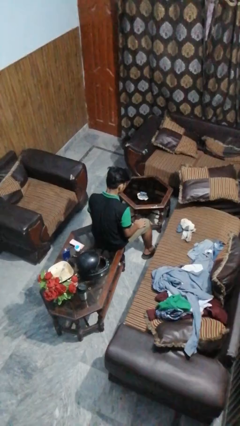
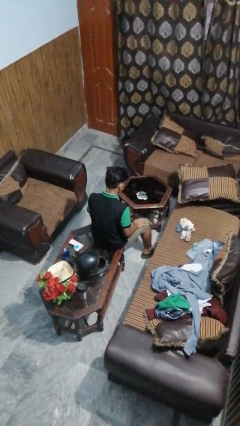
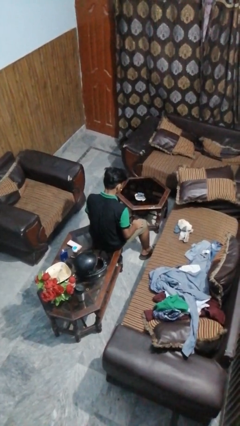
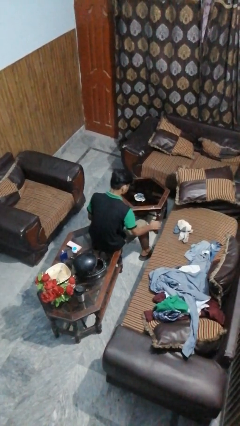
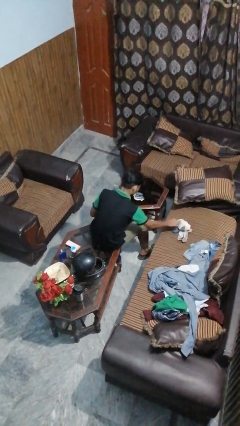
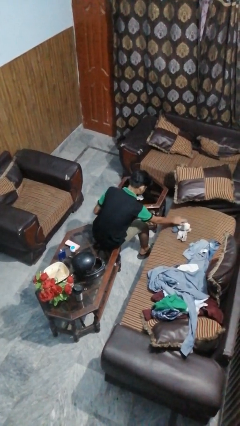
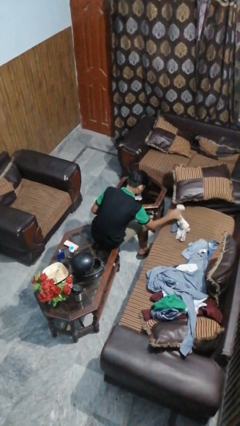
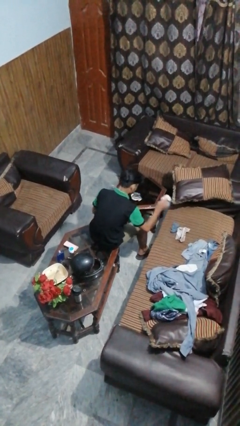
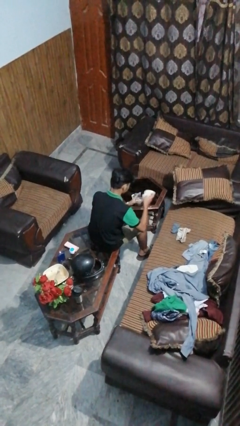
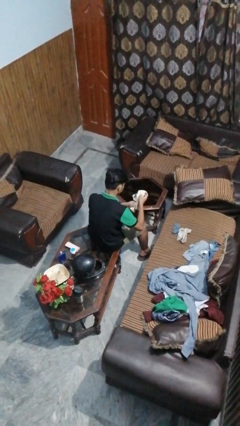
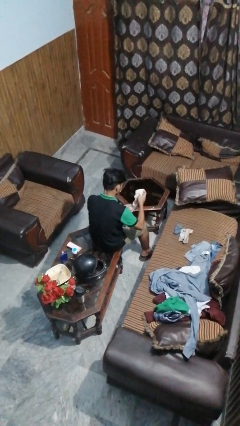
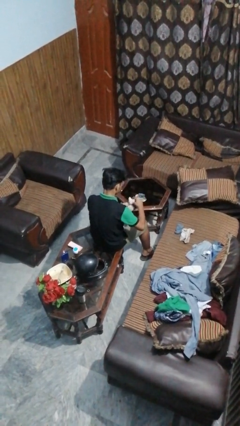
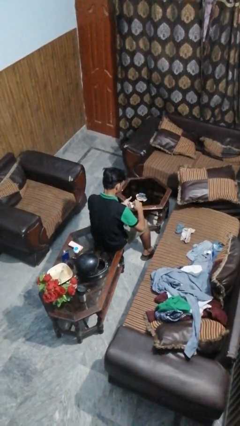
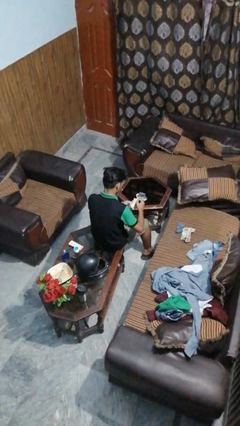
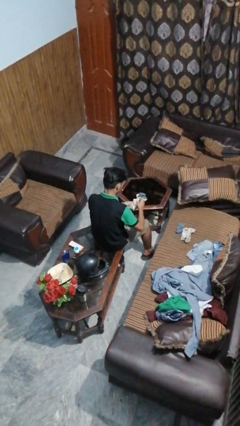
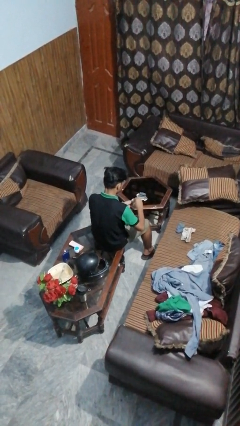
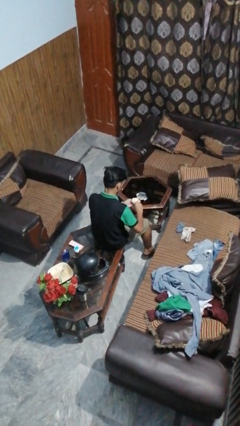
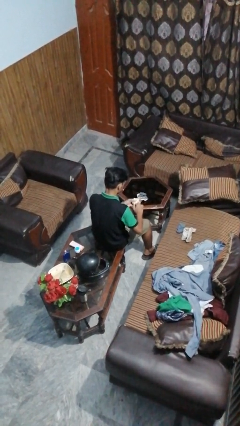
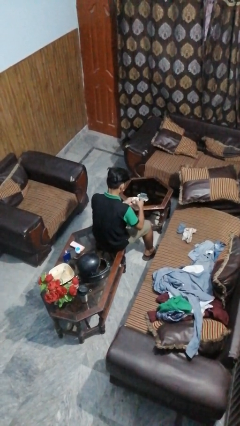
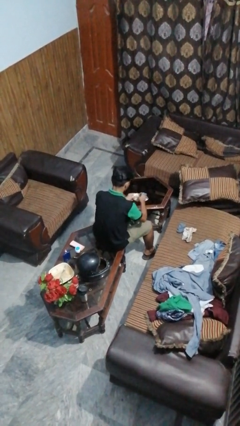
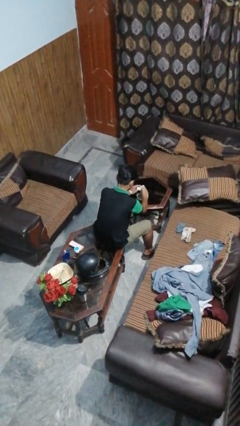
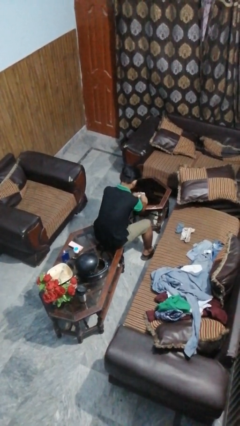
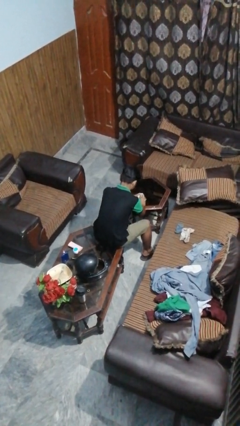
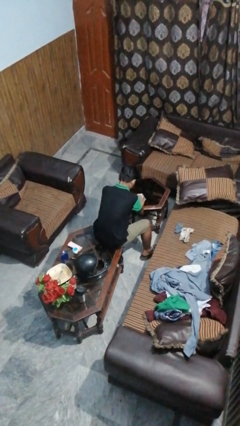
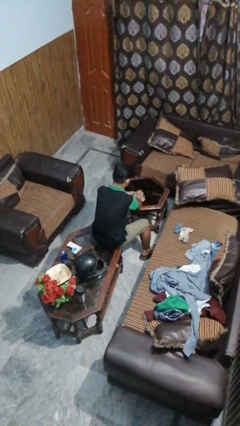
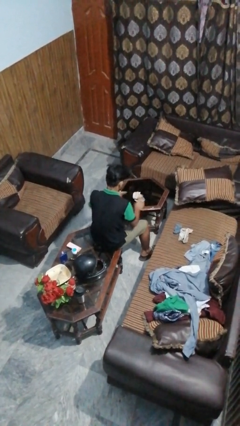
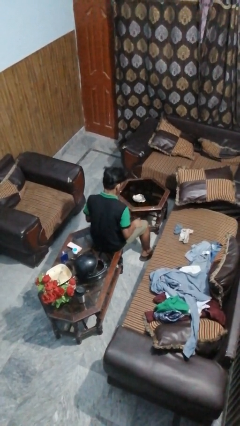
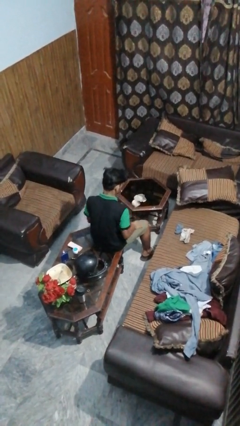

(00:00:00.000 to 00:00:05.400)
person folds socks

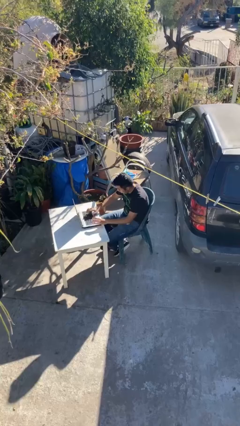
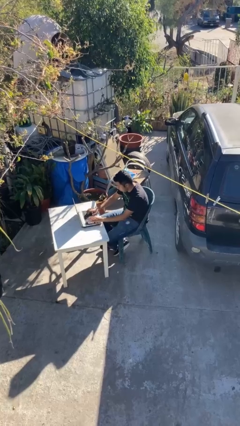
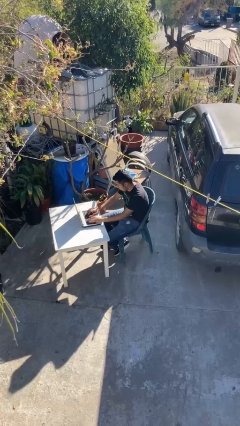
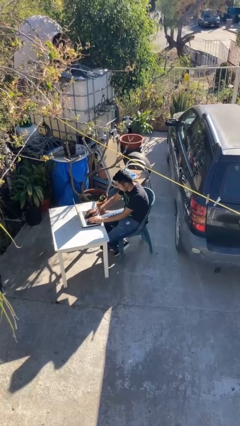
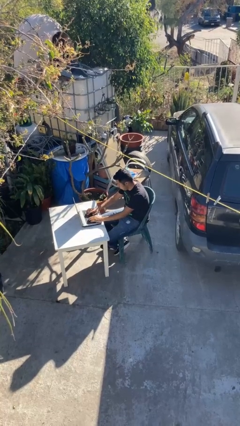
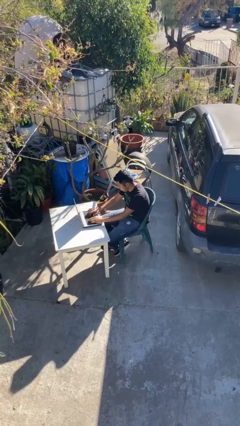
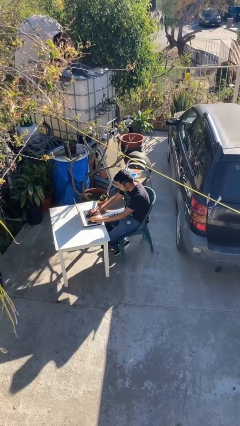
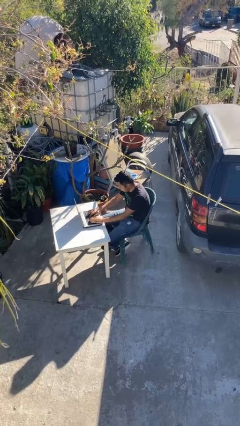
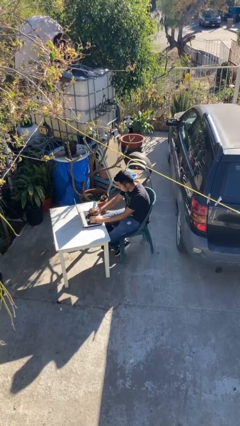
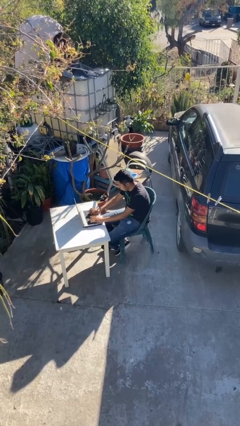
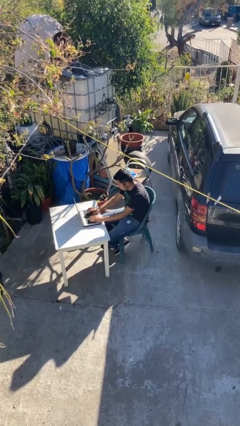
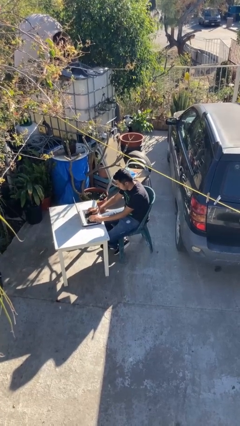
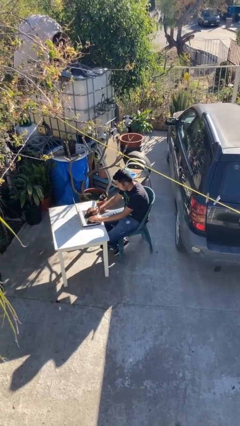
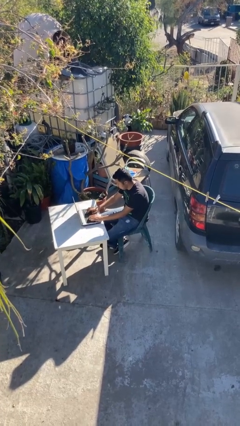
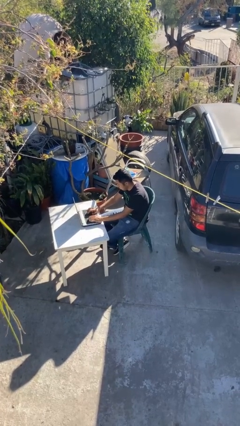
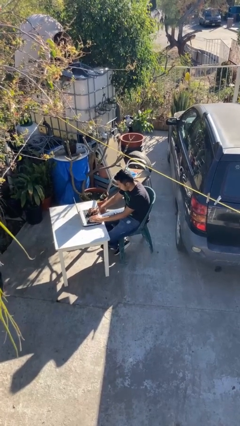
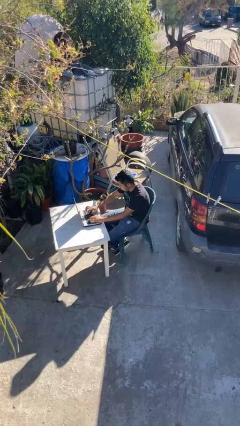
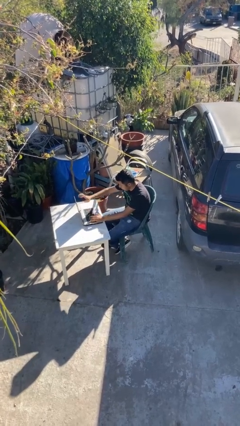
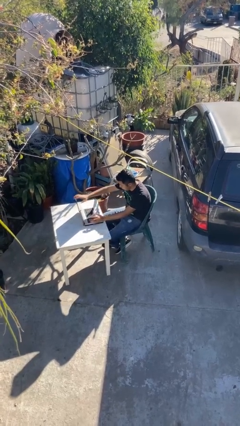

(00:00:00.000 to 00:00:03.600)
person interacts with laptop

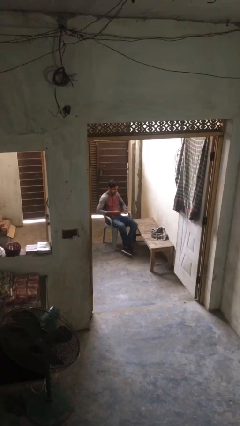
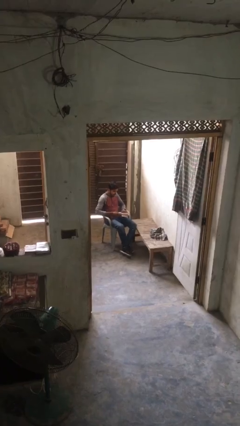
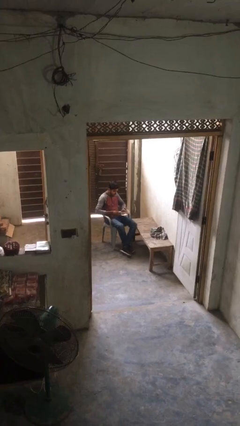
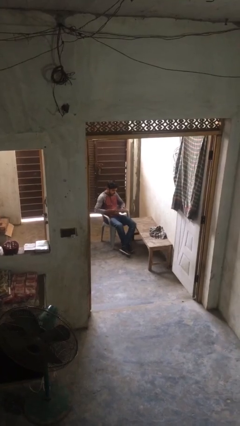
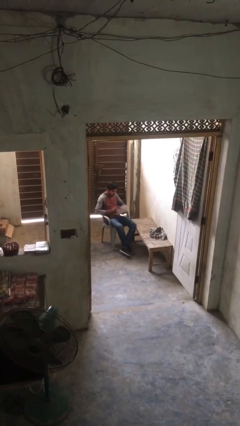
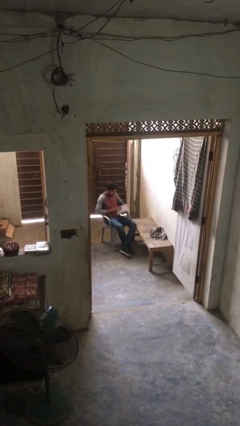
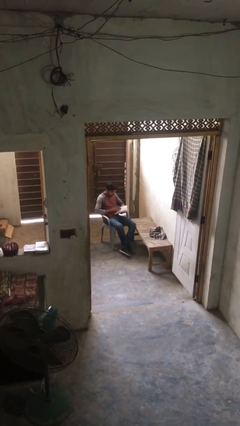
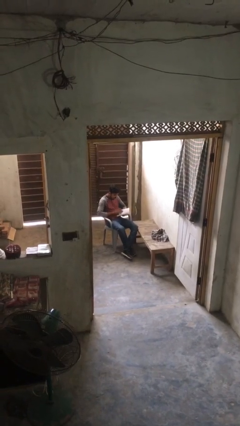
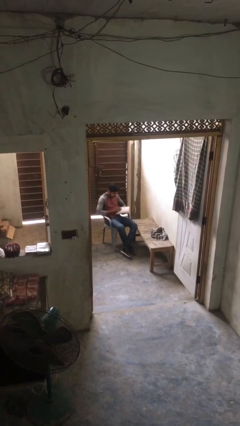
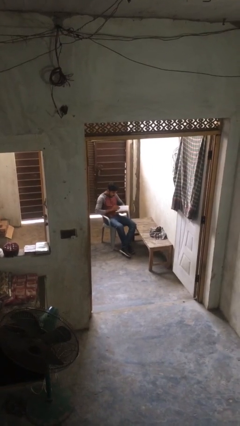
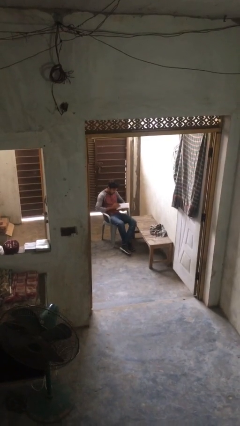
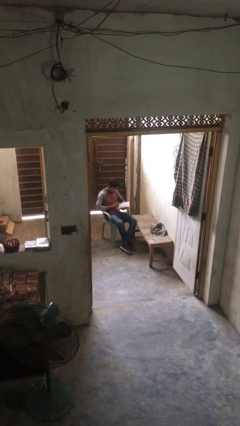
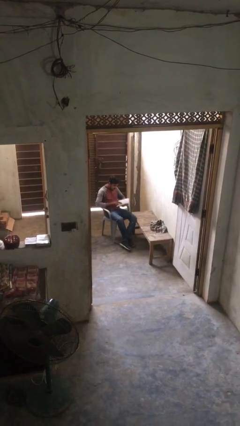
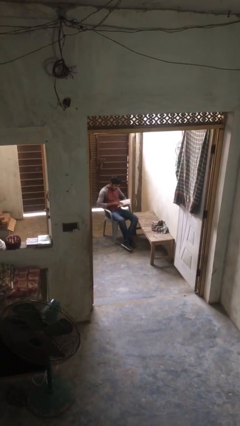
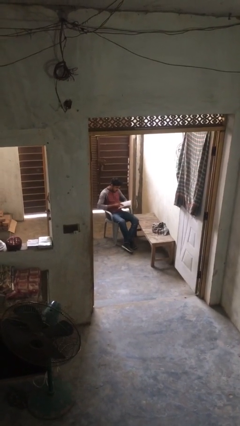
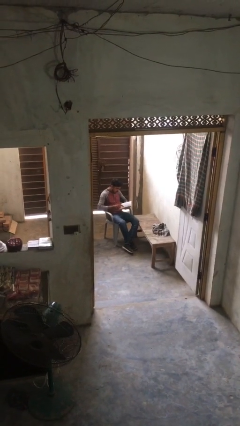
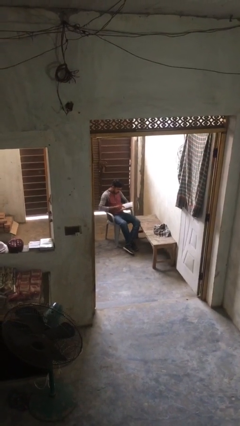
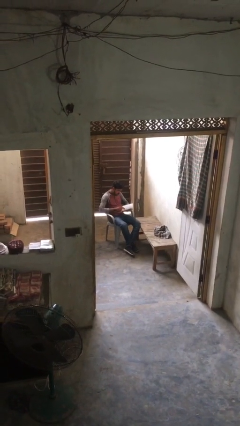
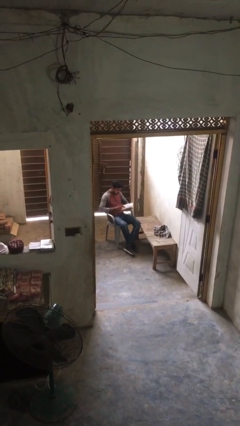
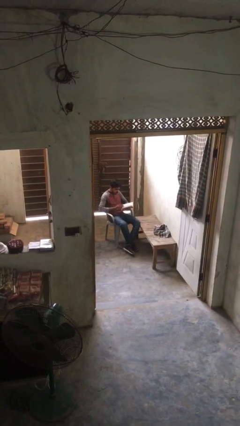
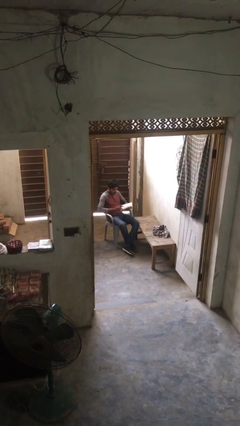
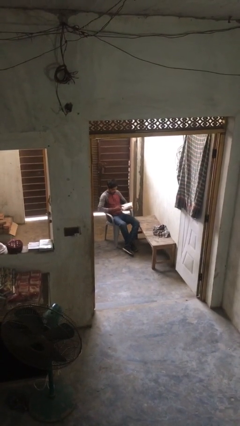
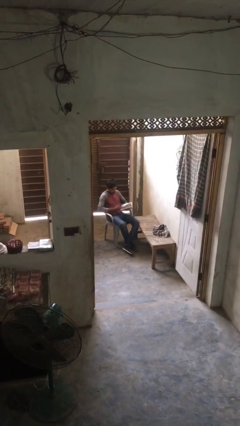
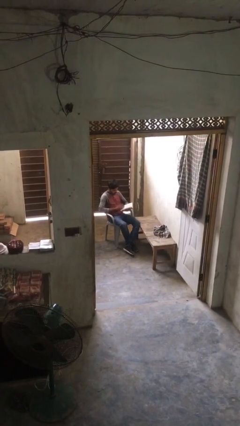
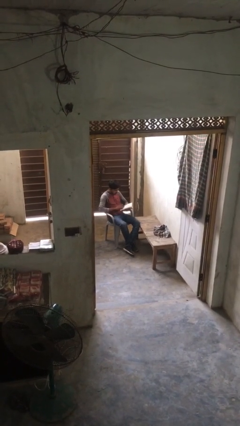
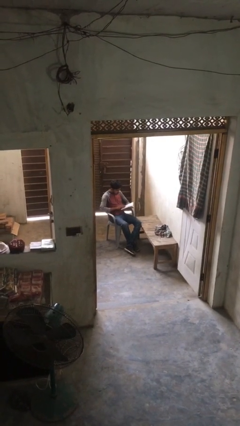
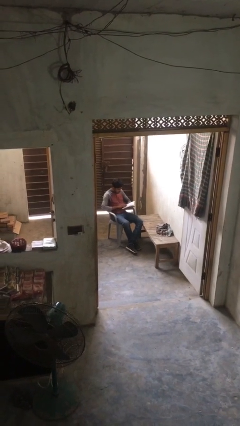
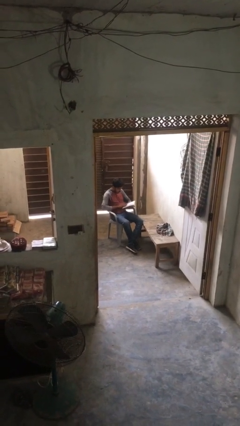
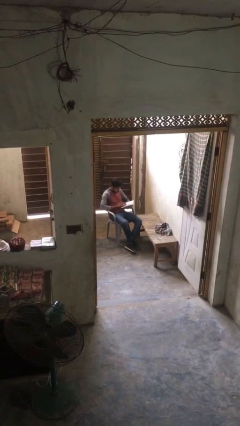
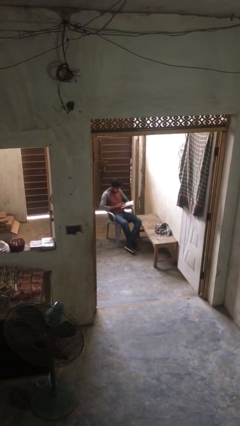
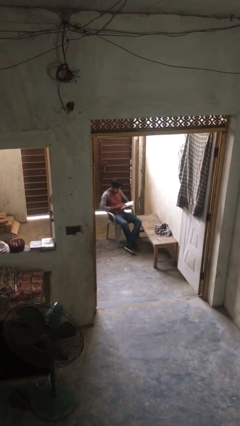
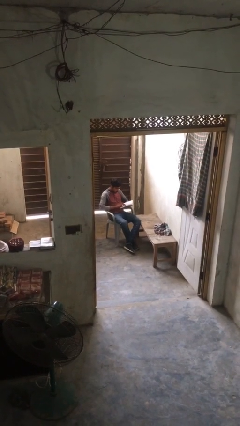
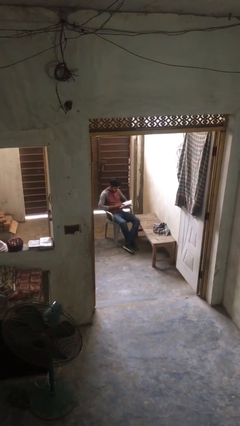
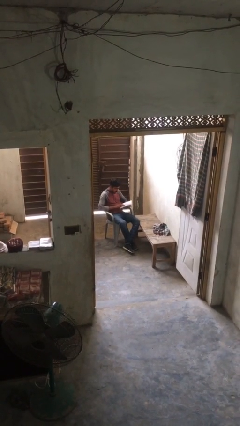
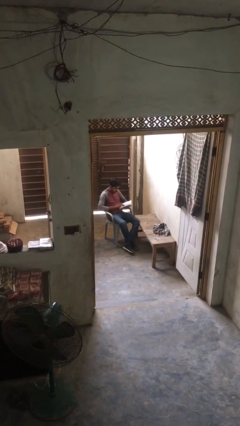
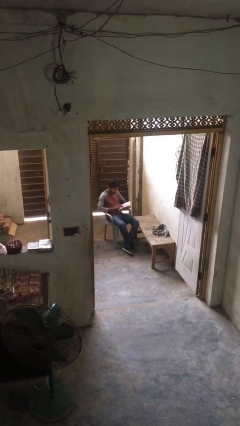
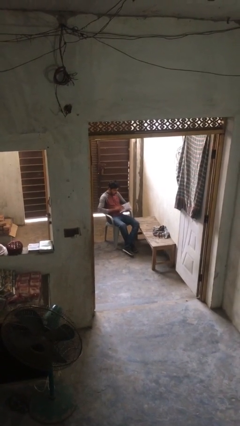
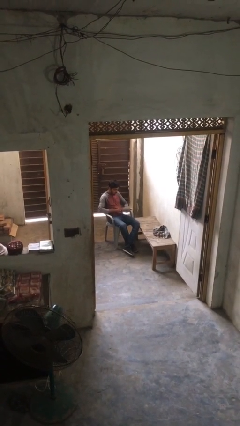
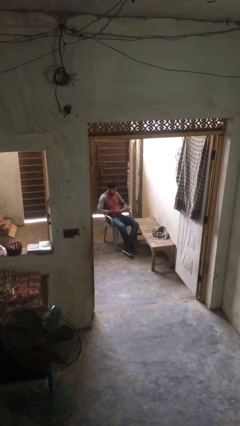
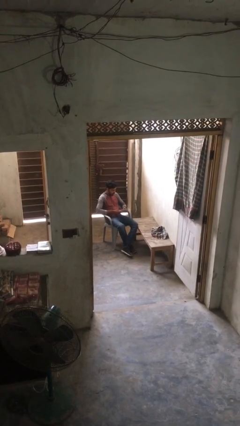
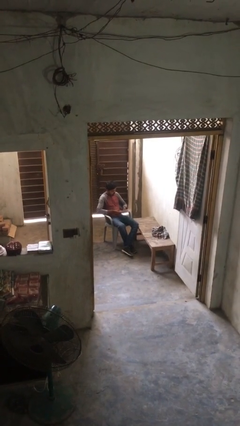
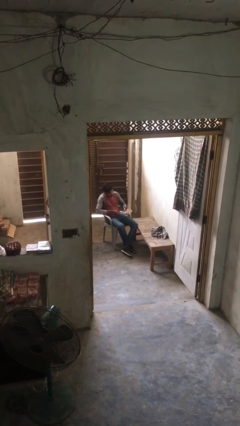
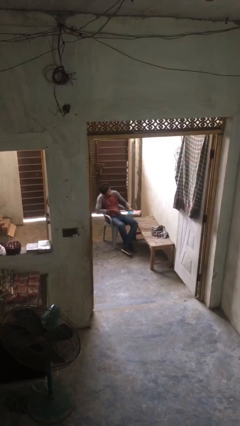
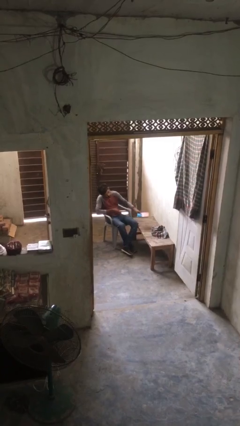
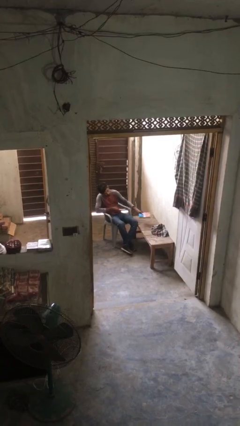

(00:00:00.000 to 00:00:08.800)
person reads document

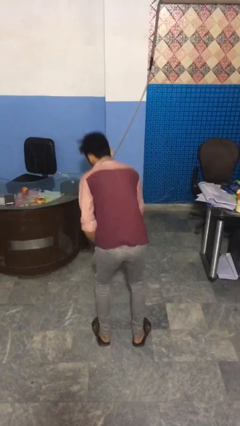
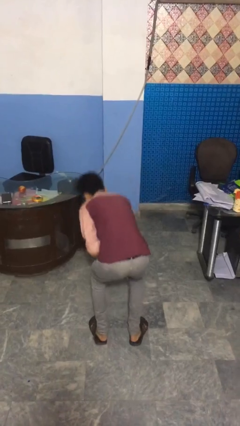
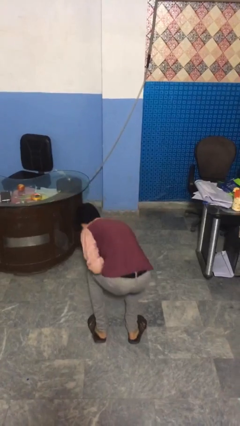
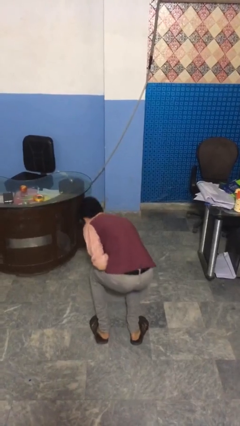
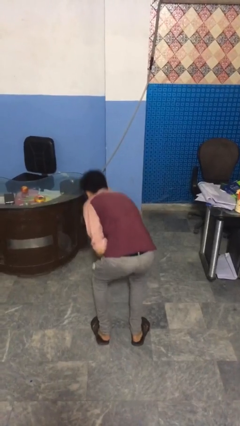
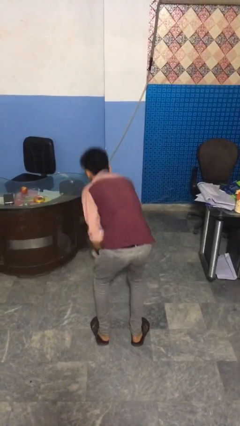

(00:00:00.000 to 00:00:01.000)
person picks up object from floor
